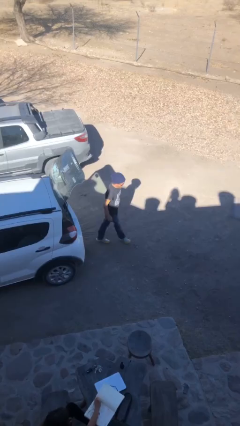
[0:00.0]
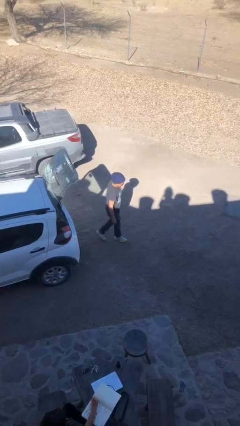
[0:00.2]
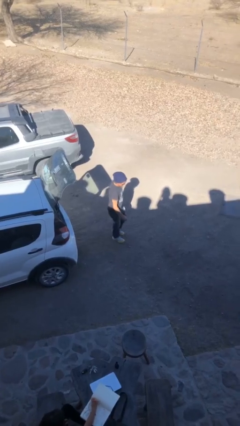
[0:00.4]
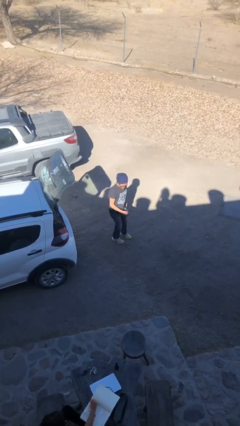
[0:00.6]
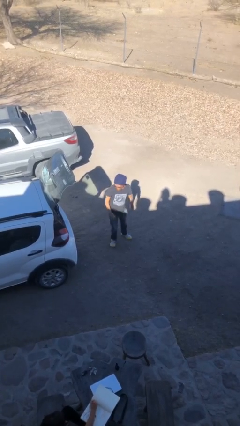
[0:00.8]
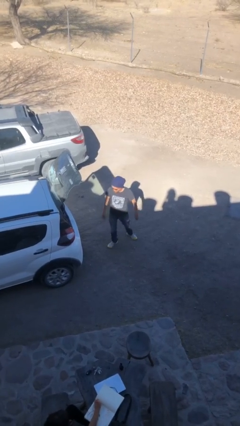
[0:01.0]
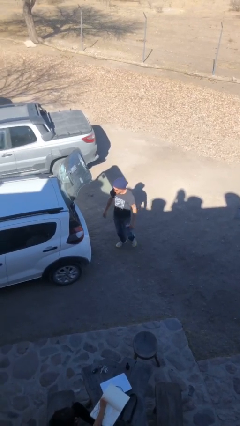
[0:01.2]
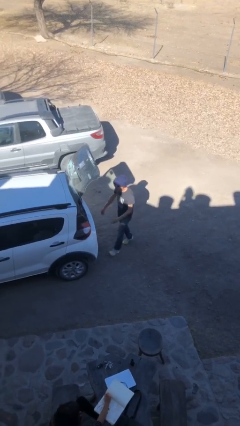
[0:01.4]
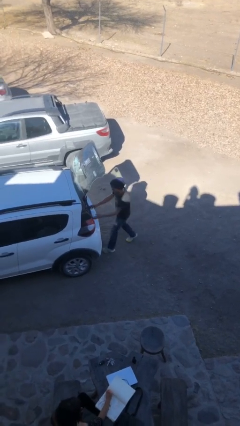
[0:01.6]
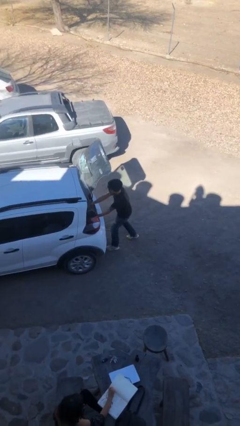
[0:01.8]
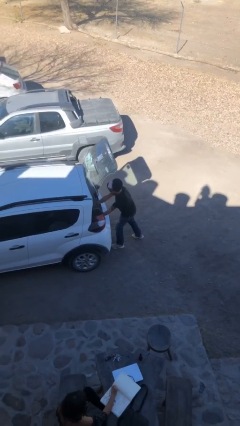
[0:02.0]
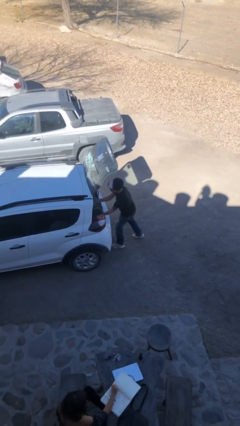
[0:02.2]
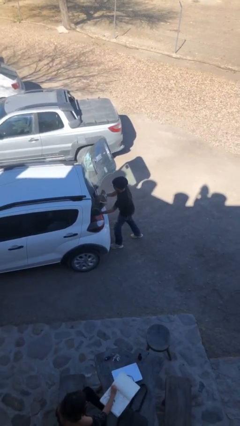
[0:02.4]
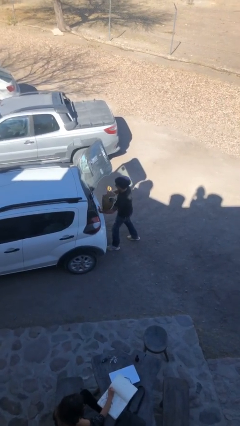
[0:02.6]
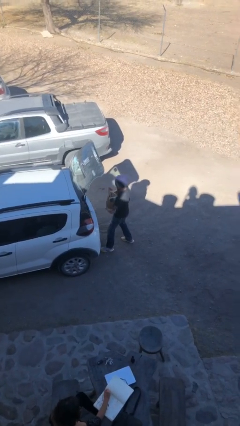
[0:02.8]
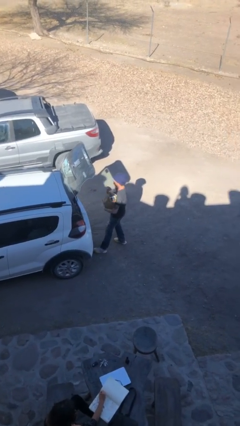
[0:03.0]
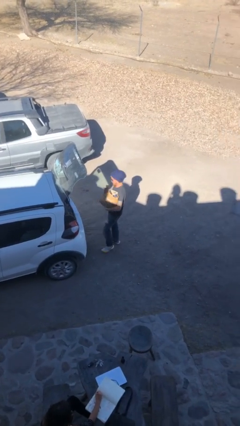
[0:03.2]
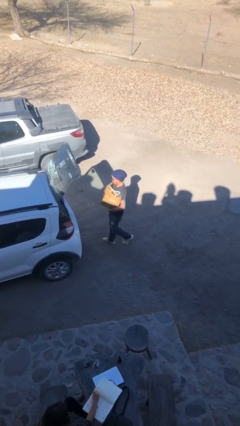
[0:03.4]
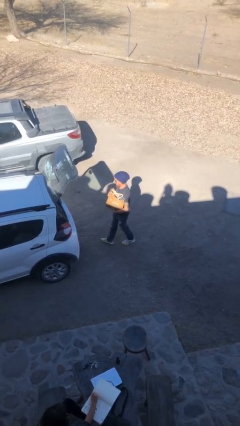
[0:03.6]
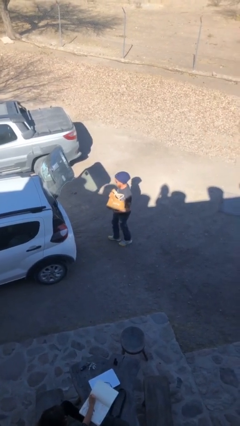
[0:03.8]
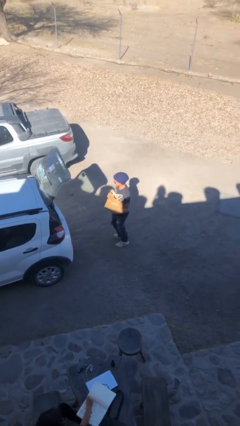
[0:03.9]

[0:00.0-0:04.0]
person unloads car

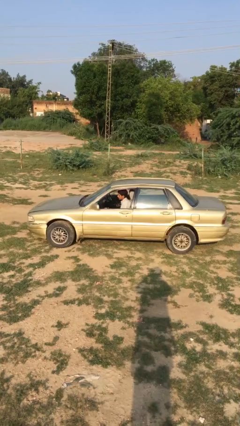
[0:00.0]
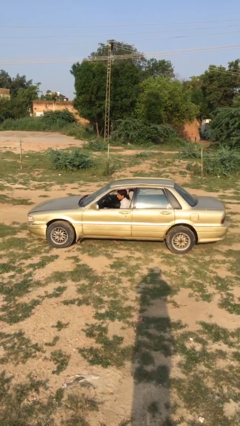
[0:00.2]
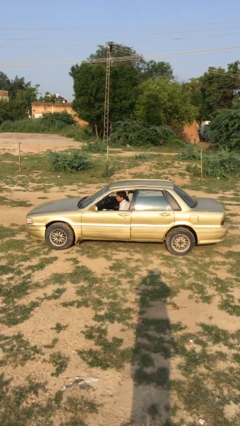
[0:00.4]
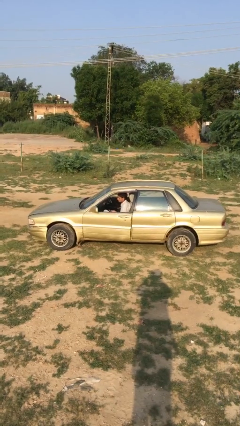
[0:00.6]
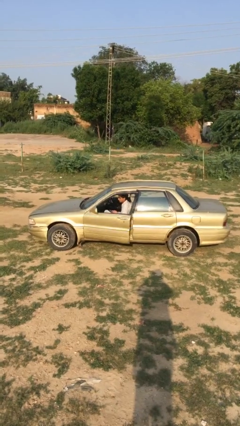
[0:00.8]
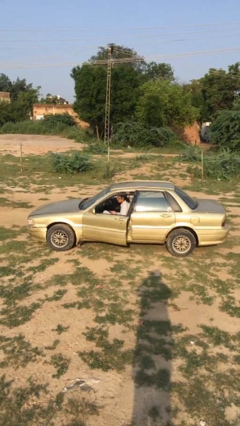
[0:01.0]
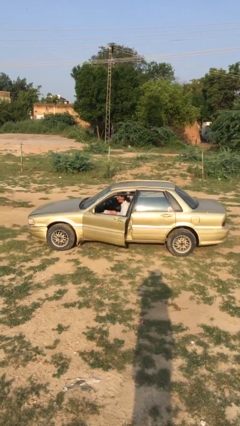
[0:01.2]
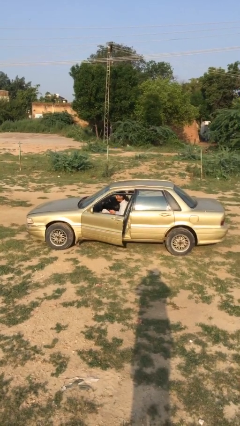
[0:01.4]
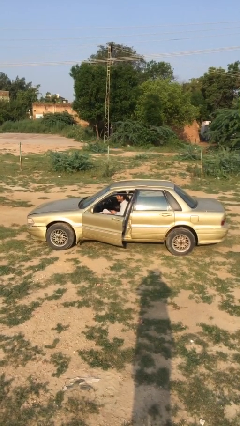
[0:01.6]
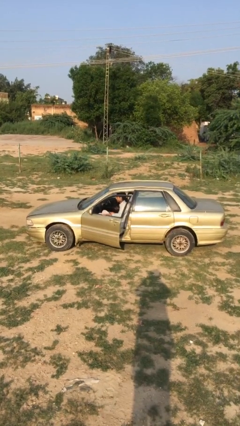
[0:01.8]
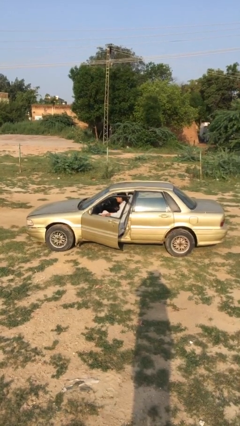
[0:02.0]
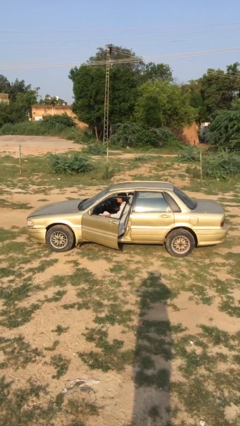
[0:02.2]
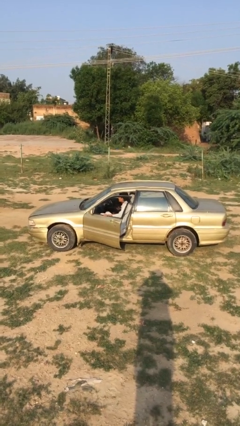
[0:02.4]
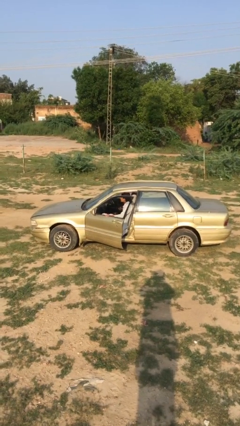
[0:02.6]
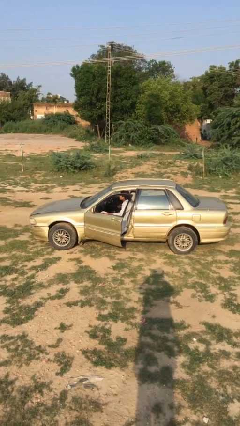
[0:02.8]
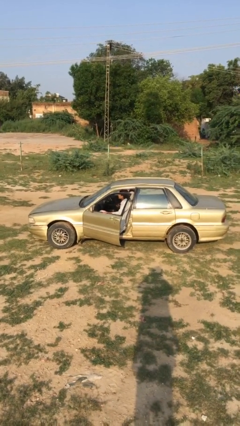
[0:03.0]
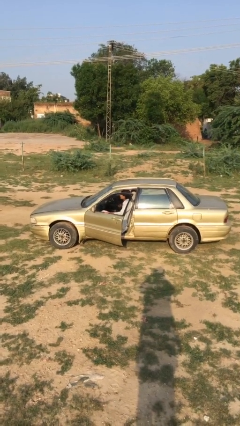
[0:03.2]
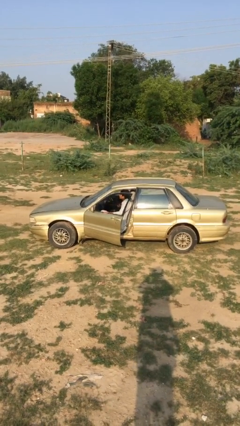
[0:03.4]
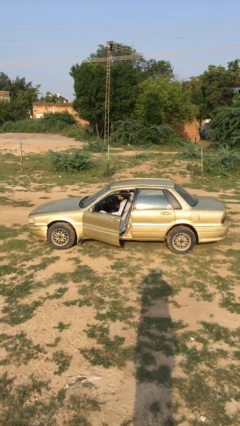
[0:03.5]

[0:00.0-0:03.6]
person opens car door

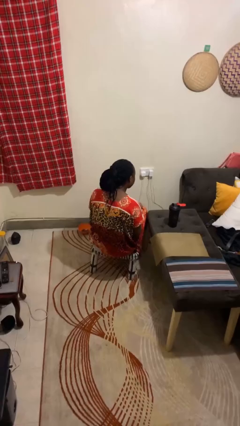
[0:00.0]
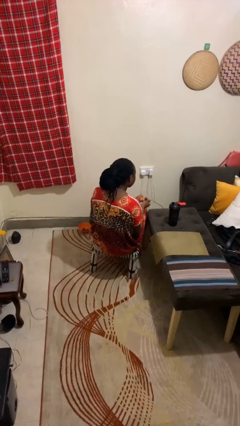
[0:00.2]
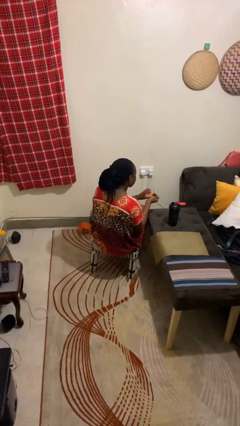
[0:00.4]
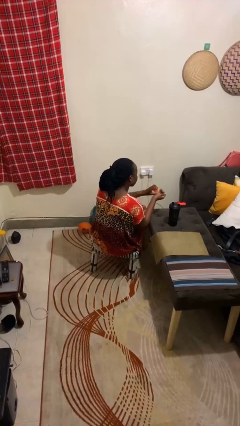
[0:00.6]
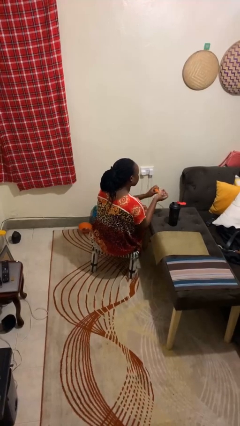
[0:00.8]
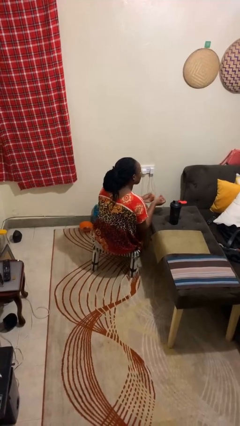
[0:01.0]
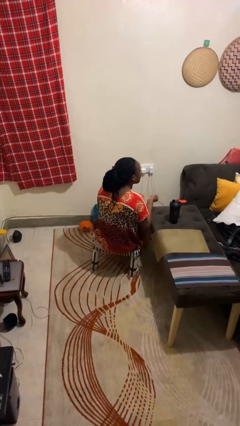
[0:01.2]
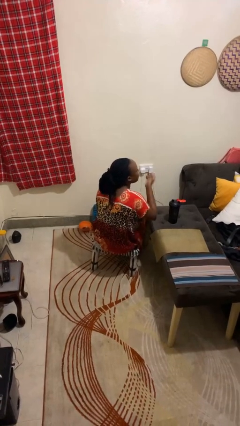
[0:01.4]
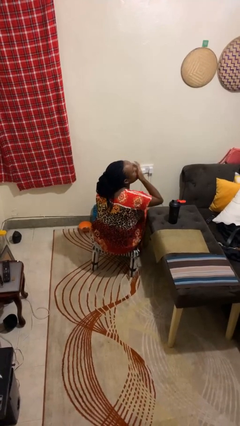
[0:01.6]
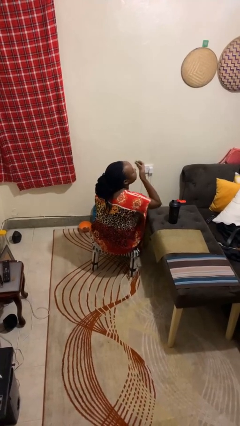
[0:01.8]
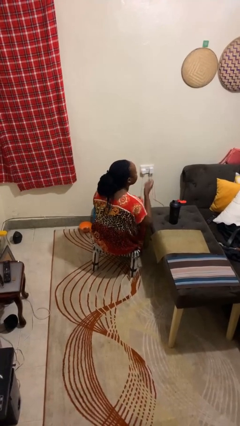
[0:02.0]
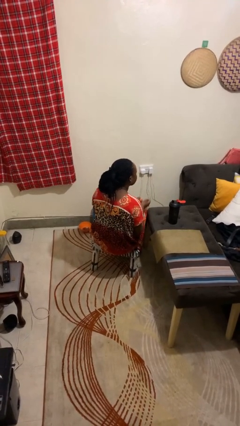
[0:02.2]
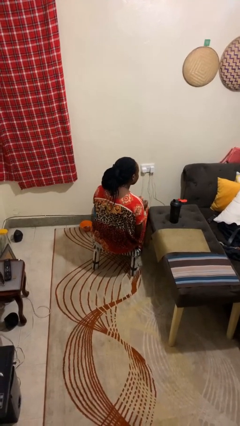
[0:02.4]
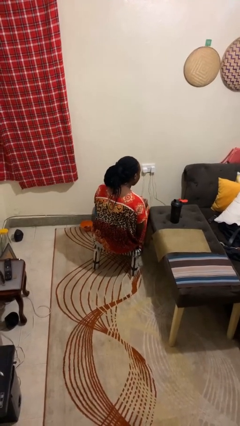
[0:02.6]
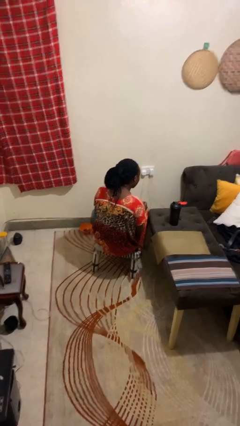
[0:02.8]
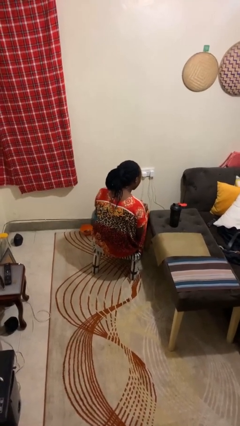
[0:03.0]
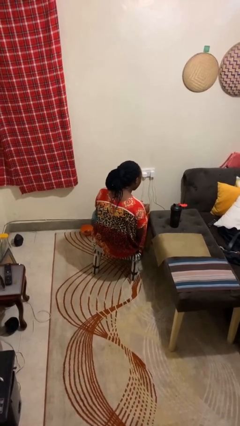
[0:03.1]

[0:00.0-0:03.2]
person takes medicine pills

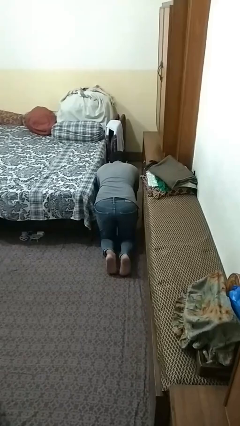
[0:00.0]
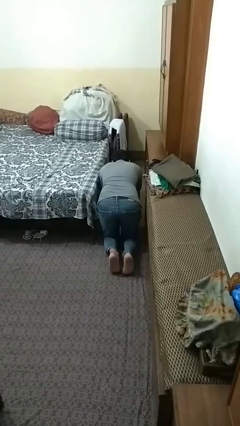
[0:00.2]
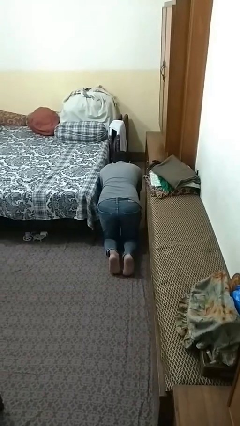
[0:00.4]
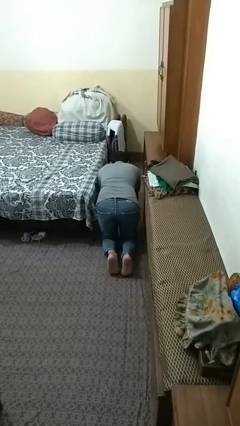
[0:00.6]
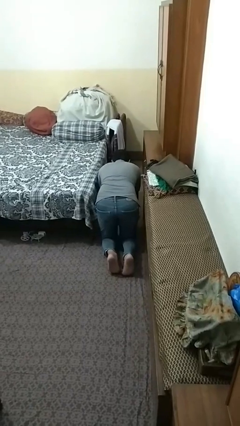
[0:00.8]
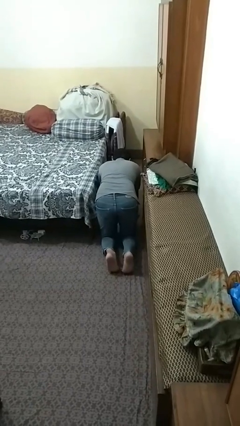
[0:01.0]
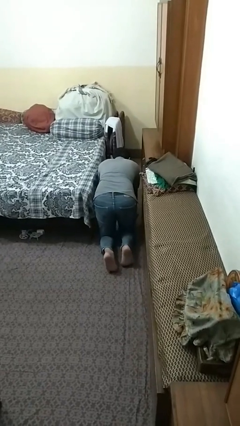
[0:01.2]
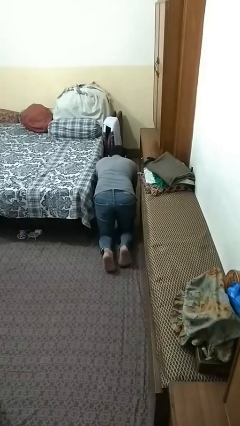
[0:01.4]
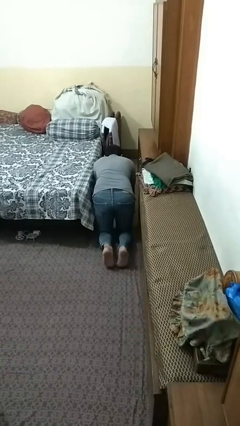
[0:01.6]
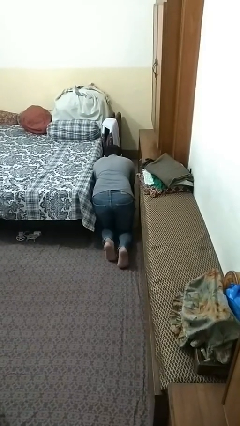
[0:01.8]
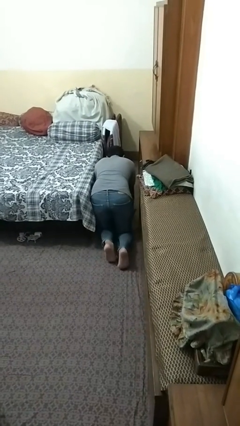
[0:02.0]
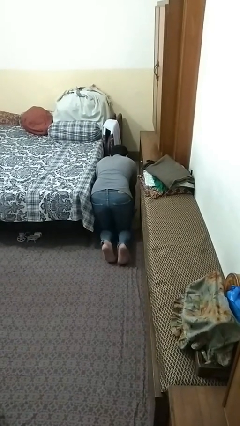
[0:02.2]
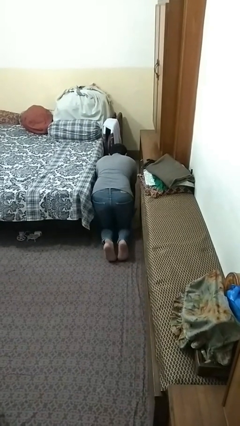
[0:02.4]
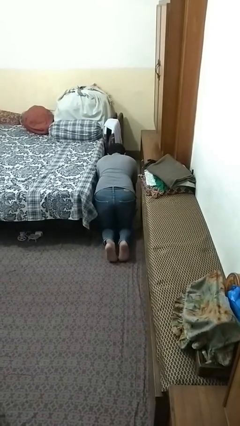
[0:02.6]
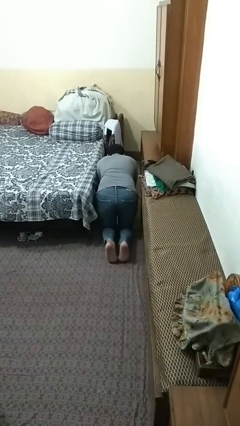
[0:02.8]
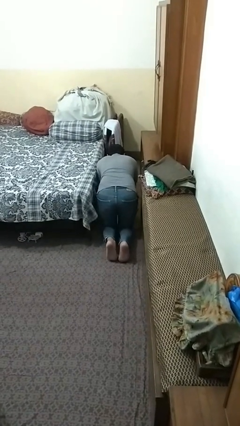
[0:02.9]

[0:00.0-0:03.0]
person crawls

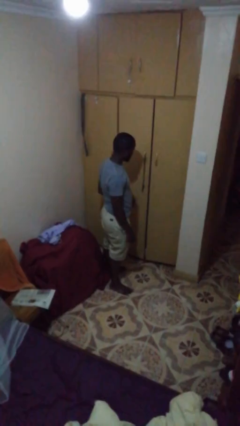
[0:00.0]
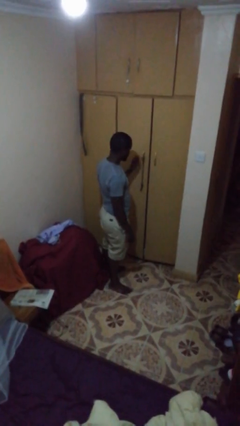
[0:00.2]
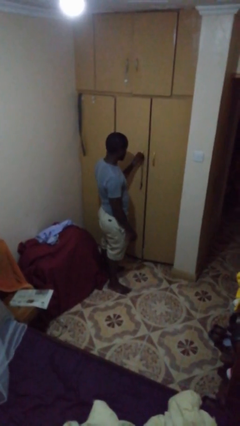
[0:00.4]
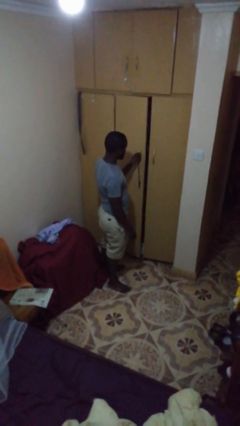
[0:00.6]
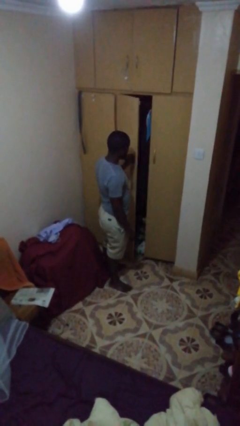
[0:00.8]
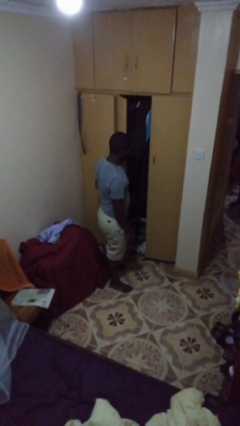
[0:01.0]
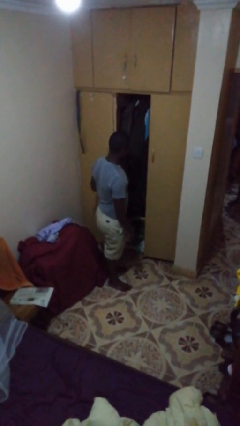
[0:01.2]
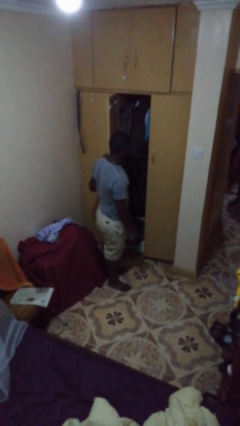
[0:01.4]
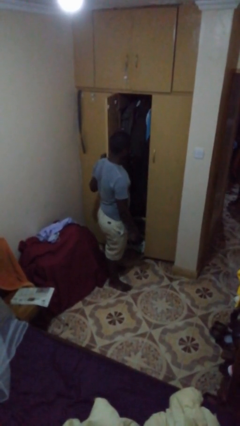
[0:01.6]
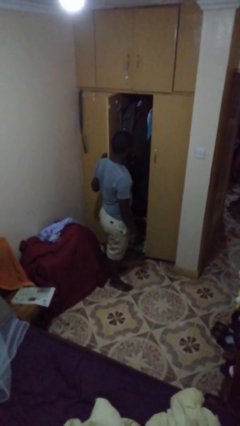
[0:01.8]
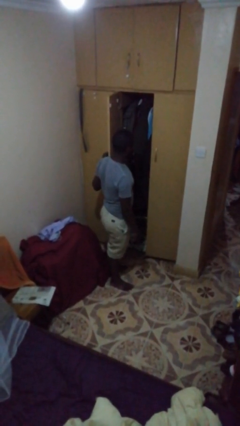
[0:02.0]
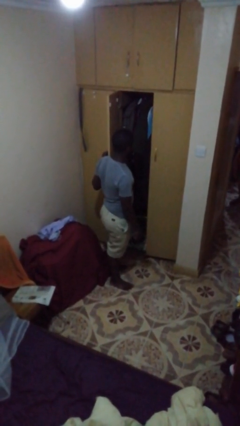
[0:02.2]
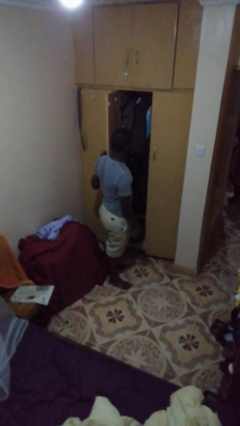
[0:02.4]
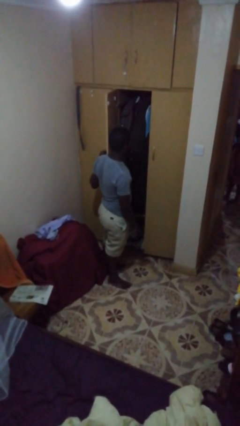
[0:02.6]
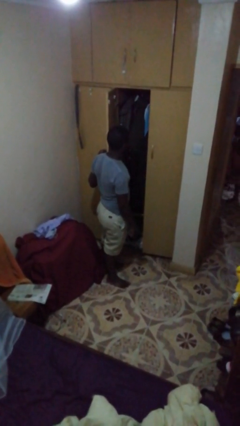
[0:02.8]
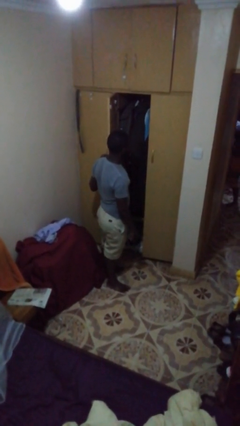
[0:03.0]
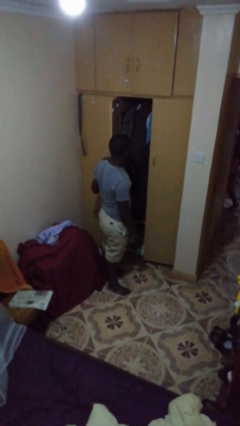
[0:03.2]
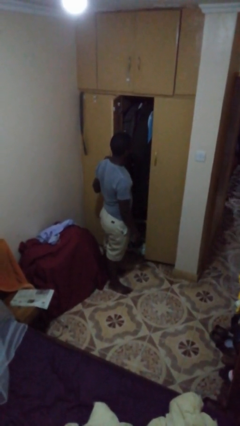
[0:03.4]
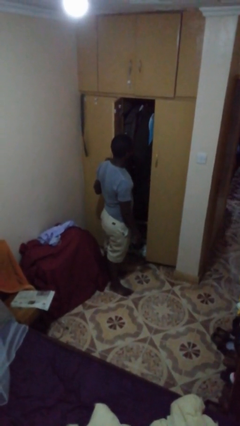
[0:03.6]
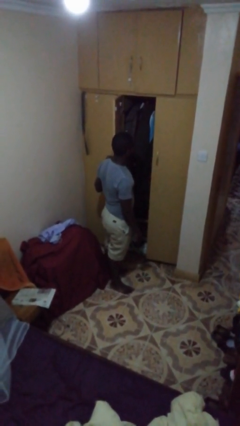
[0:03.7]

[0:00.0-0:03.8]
person opens closet door
